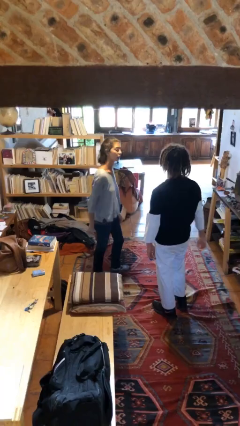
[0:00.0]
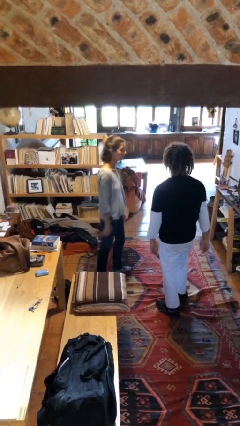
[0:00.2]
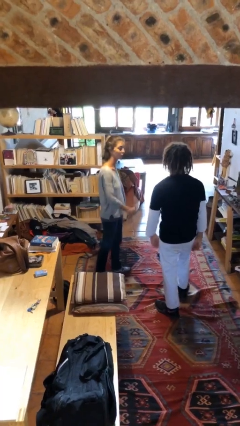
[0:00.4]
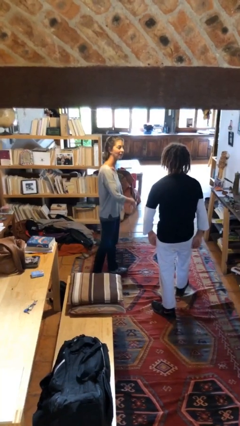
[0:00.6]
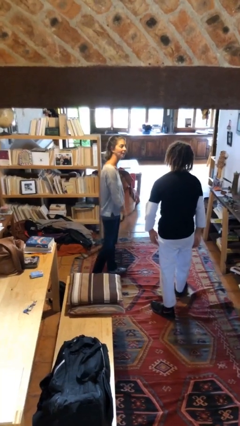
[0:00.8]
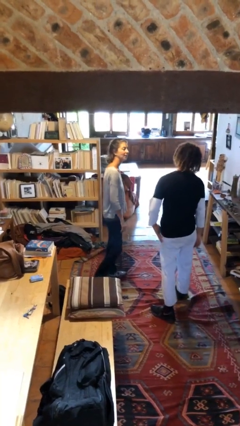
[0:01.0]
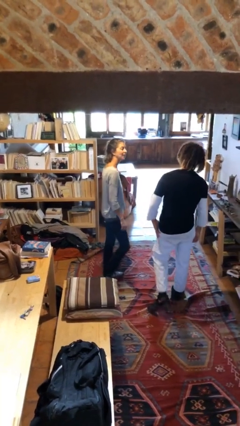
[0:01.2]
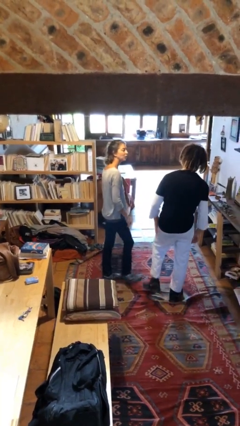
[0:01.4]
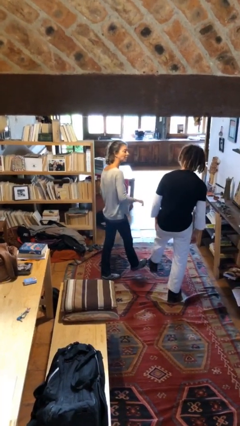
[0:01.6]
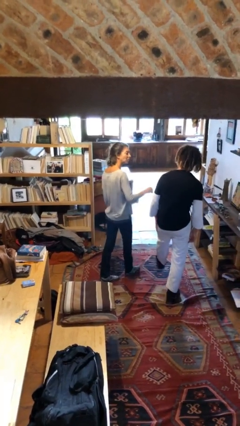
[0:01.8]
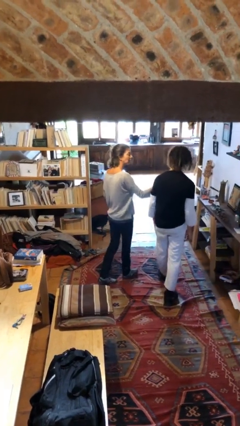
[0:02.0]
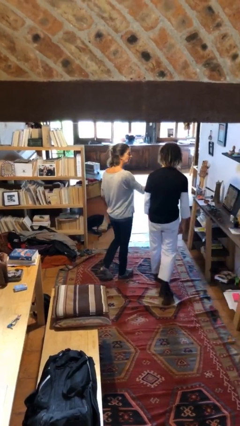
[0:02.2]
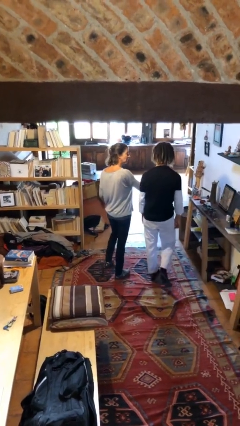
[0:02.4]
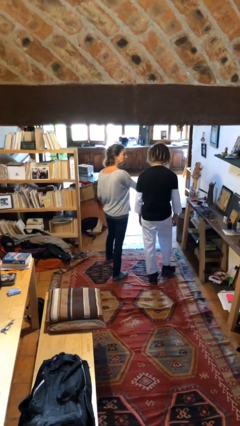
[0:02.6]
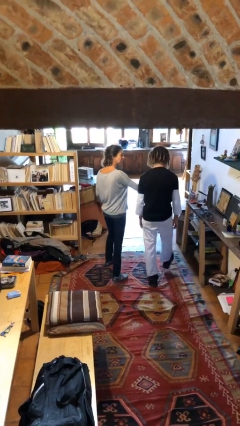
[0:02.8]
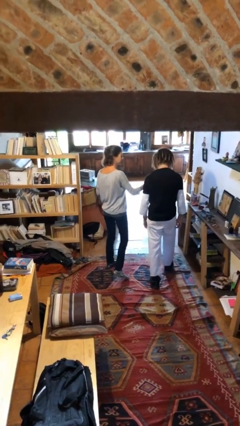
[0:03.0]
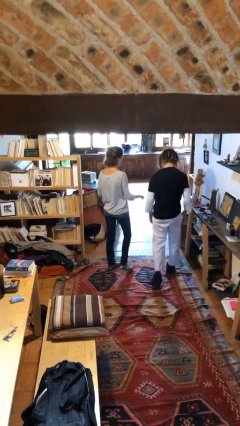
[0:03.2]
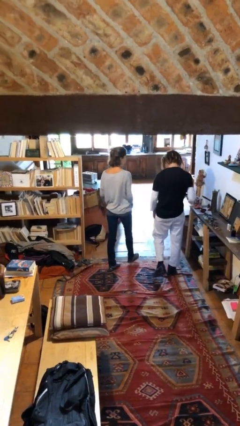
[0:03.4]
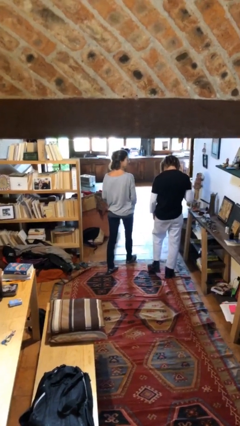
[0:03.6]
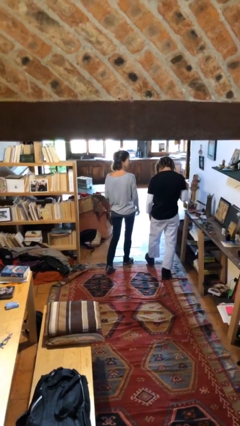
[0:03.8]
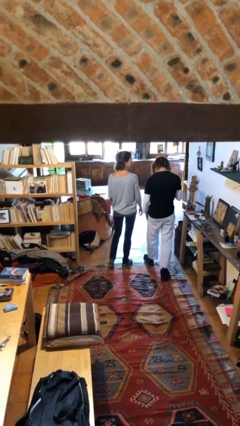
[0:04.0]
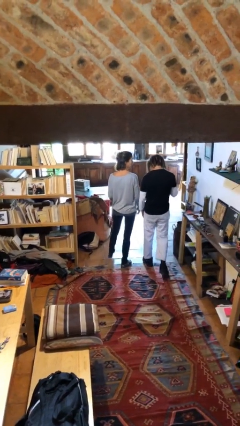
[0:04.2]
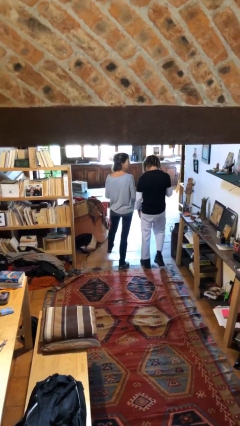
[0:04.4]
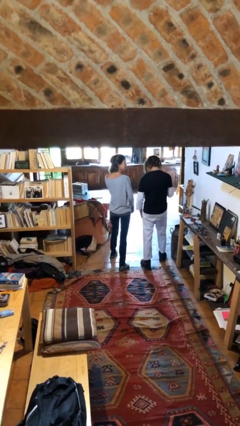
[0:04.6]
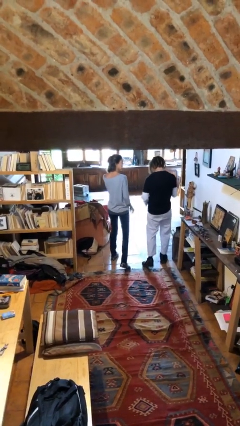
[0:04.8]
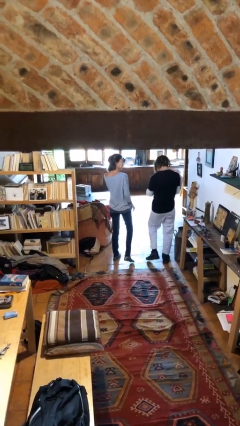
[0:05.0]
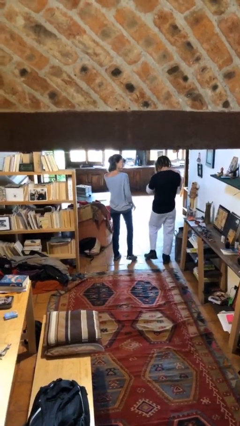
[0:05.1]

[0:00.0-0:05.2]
person talks to person

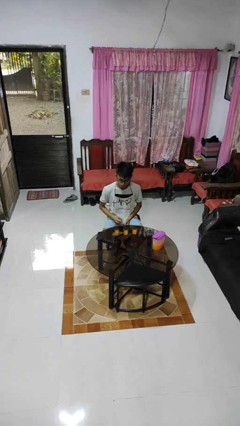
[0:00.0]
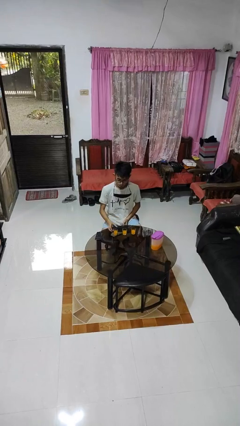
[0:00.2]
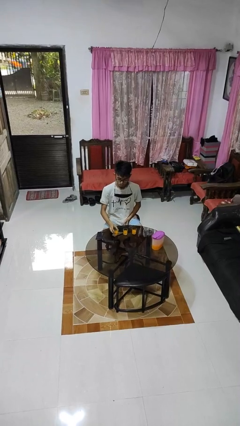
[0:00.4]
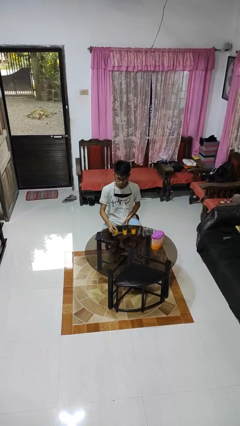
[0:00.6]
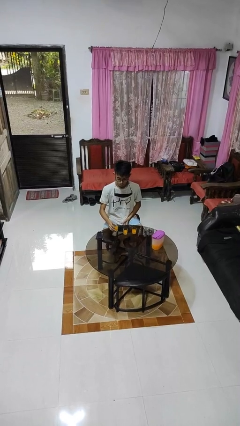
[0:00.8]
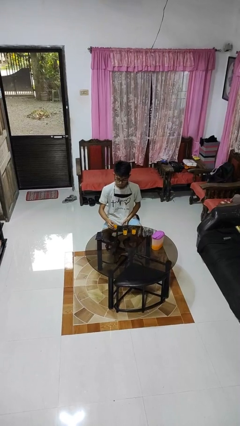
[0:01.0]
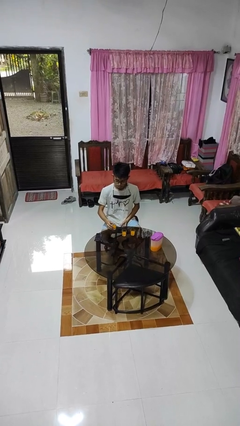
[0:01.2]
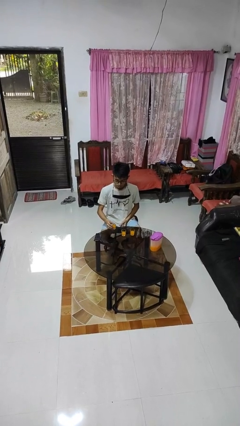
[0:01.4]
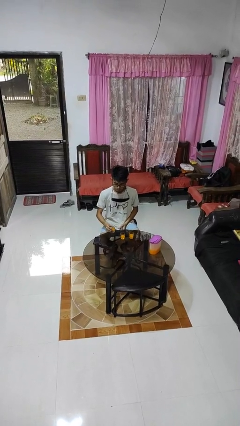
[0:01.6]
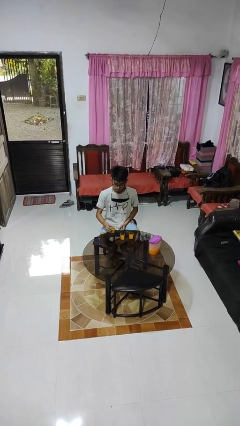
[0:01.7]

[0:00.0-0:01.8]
person picks up object from table

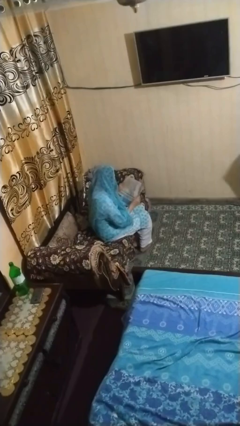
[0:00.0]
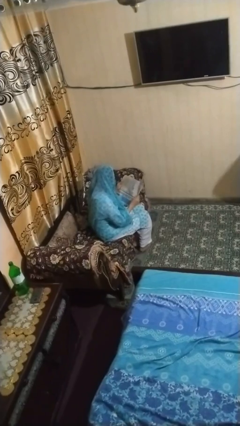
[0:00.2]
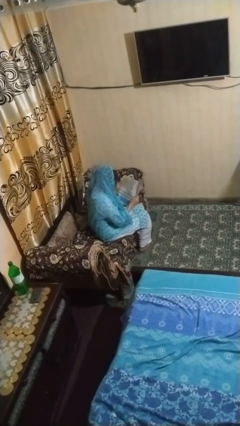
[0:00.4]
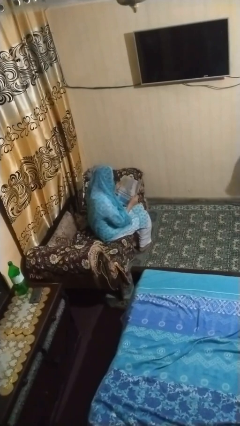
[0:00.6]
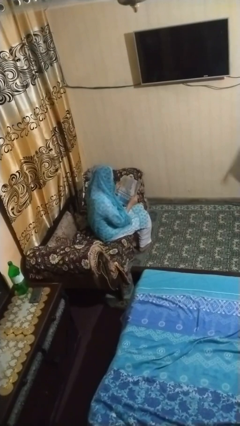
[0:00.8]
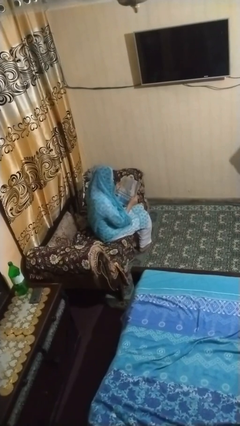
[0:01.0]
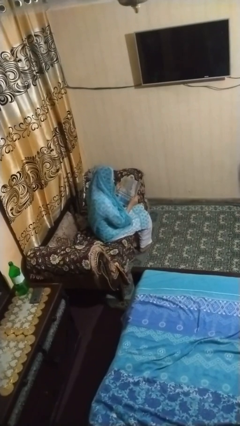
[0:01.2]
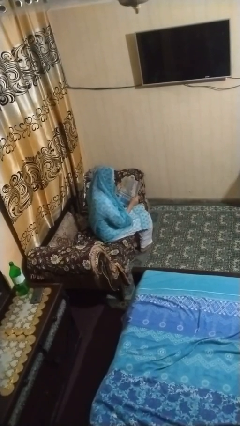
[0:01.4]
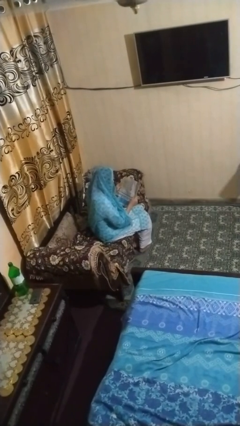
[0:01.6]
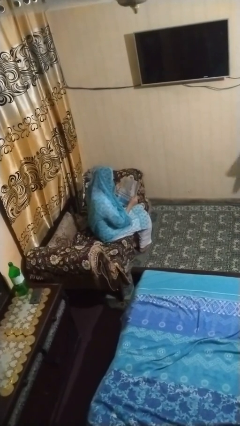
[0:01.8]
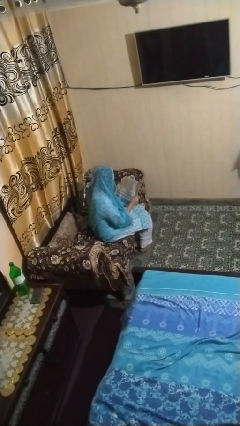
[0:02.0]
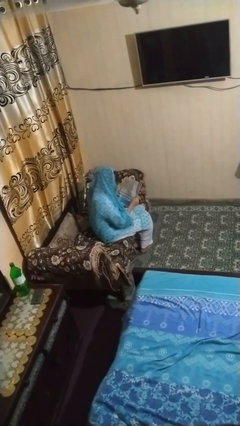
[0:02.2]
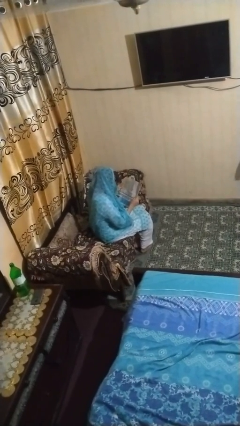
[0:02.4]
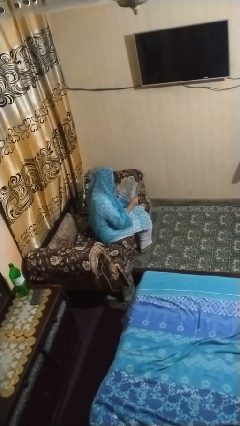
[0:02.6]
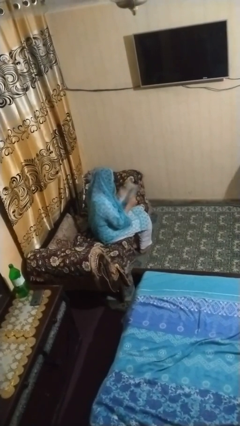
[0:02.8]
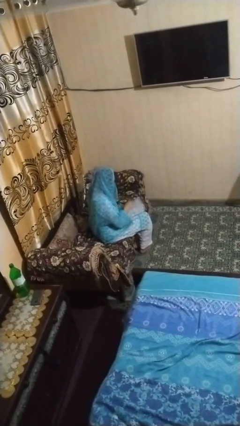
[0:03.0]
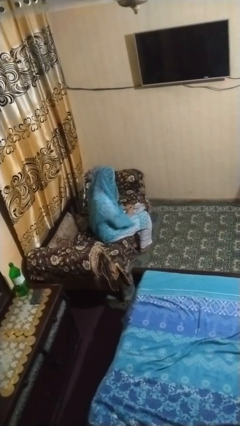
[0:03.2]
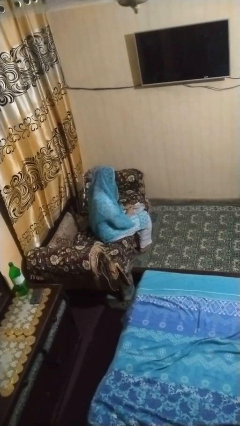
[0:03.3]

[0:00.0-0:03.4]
person reads newspaper

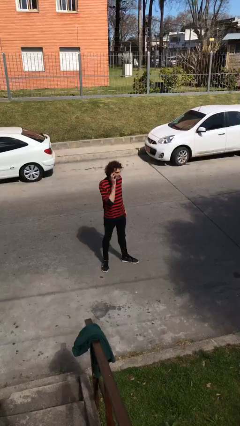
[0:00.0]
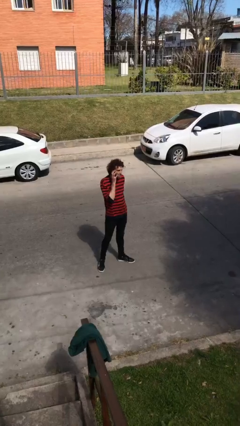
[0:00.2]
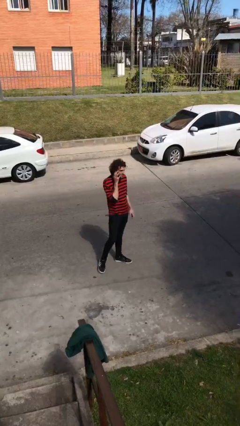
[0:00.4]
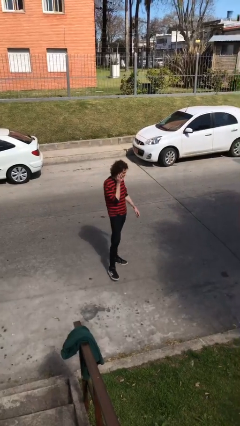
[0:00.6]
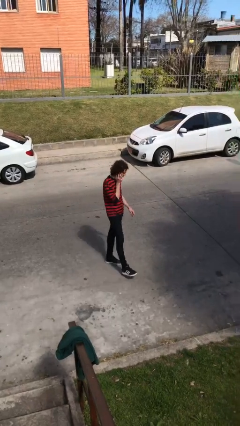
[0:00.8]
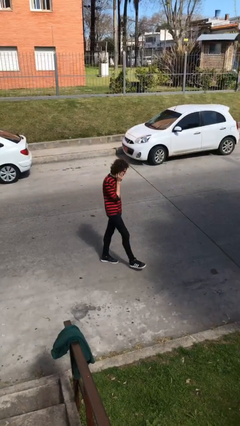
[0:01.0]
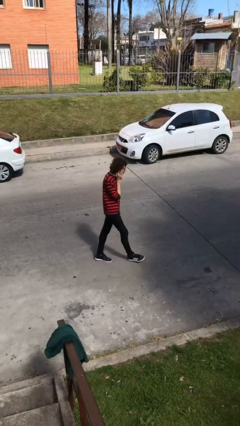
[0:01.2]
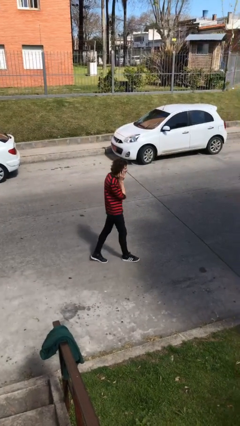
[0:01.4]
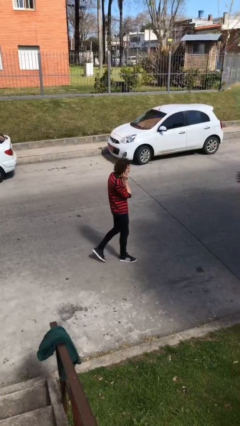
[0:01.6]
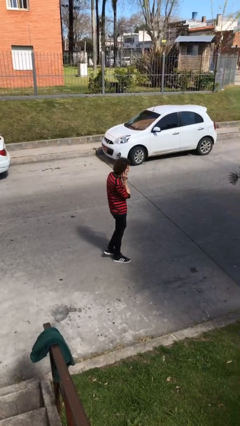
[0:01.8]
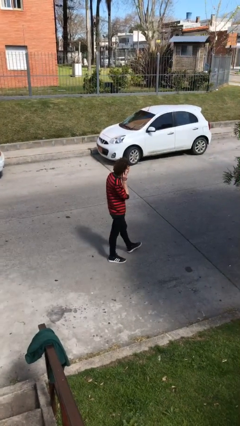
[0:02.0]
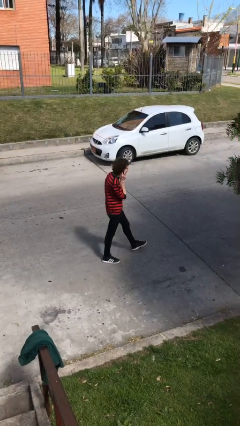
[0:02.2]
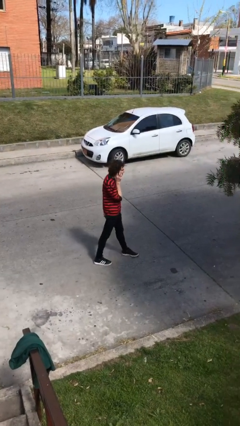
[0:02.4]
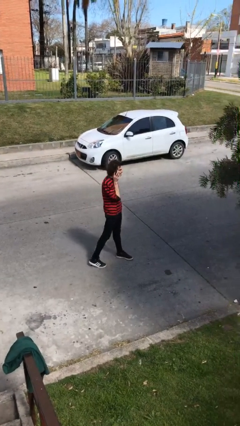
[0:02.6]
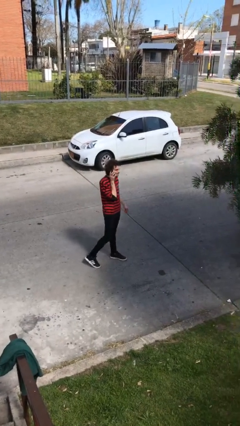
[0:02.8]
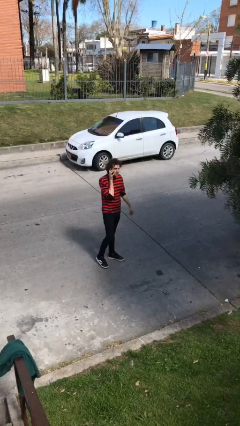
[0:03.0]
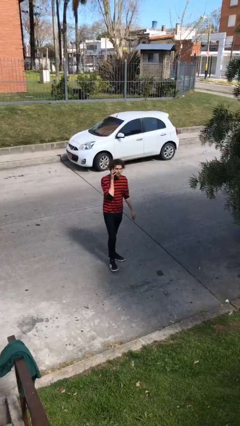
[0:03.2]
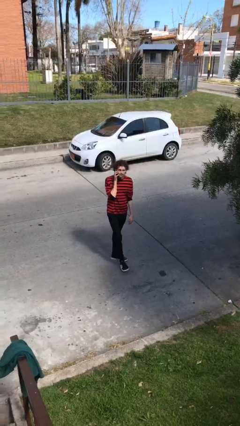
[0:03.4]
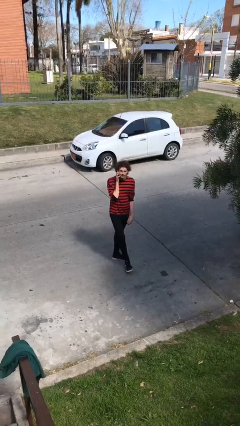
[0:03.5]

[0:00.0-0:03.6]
person talks on phone

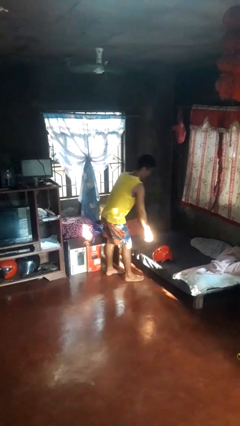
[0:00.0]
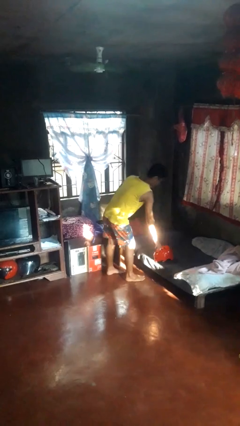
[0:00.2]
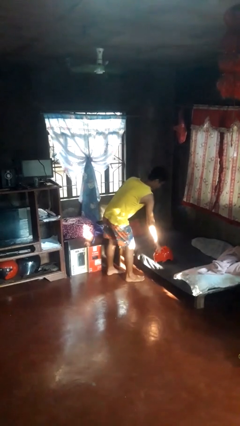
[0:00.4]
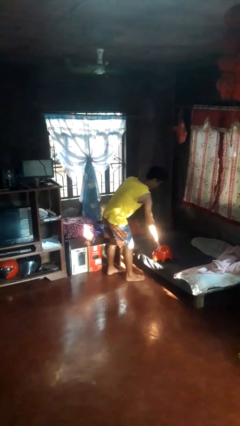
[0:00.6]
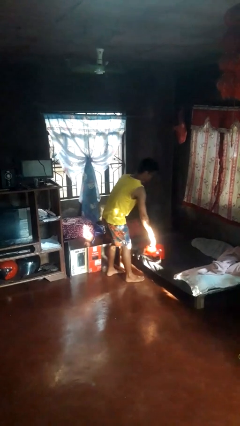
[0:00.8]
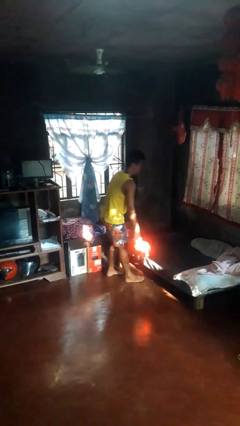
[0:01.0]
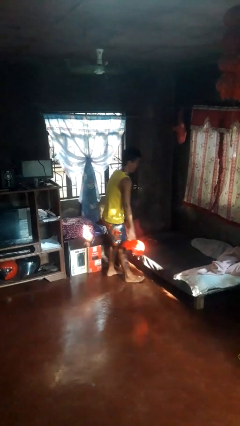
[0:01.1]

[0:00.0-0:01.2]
person picks up object from bed

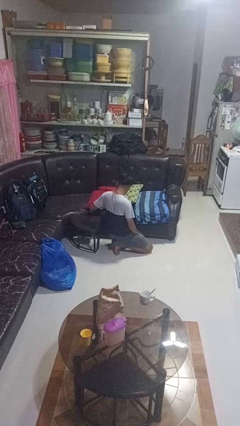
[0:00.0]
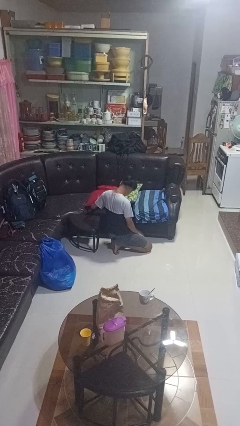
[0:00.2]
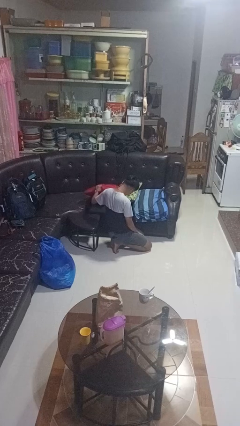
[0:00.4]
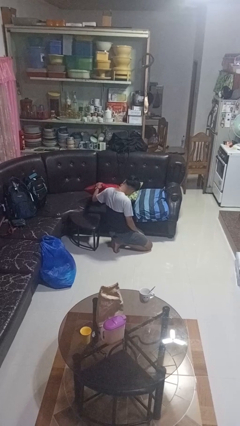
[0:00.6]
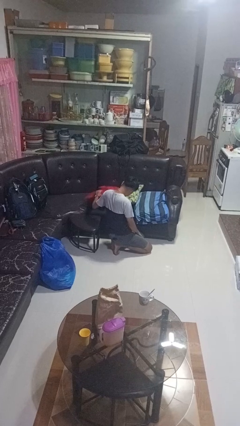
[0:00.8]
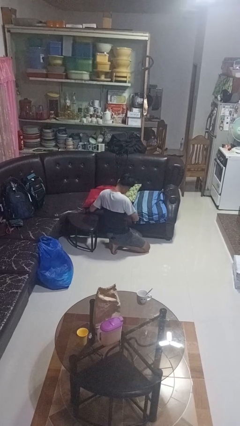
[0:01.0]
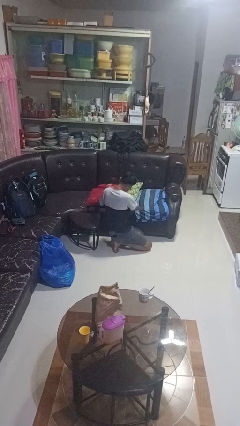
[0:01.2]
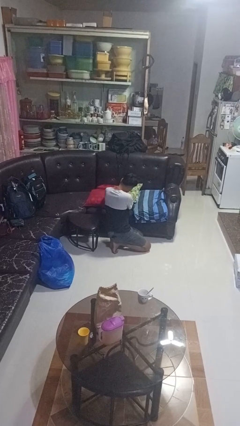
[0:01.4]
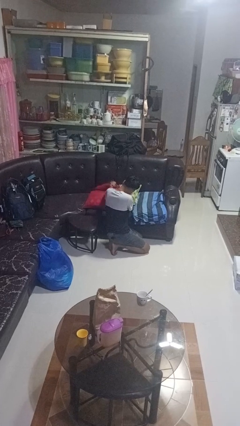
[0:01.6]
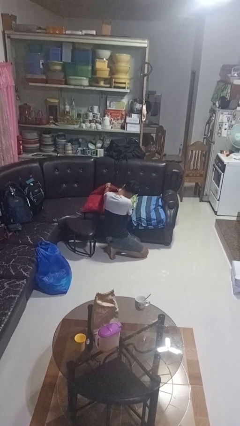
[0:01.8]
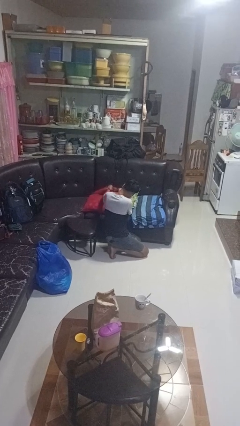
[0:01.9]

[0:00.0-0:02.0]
person searches in couch

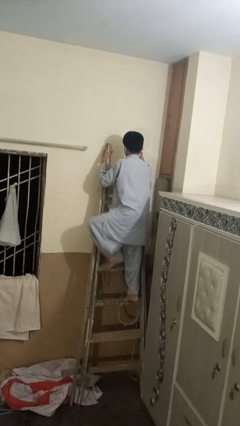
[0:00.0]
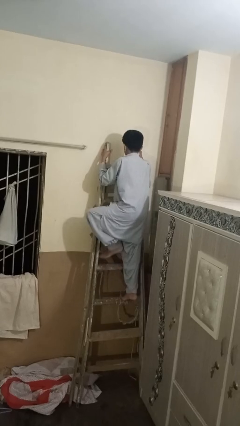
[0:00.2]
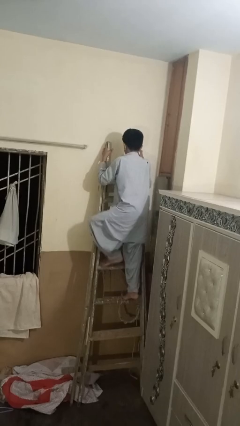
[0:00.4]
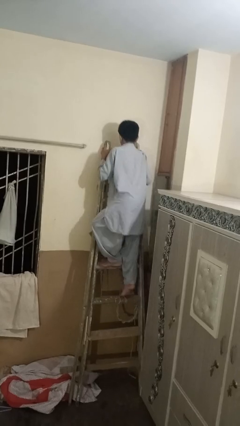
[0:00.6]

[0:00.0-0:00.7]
person climbs down ladder
